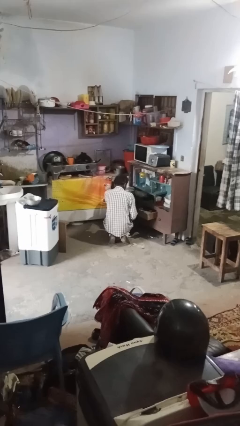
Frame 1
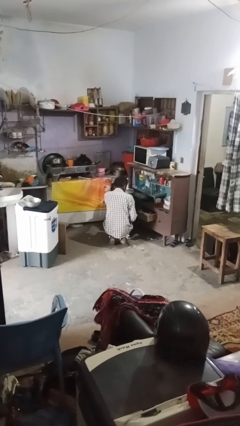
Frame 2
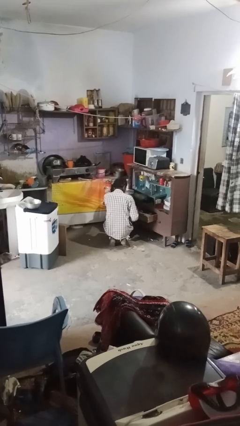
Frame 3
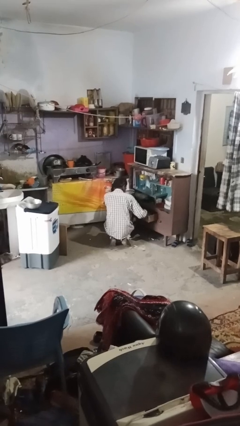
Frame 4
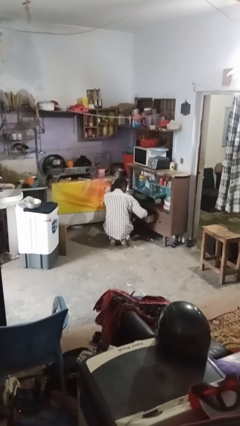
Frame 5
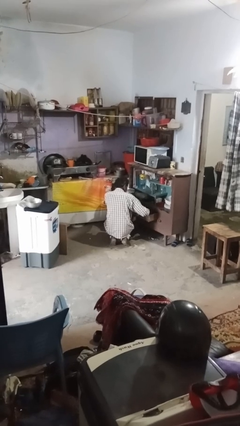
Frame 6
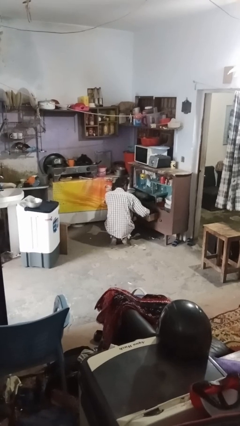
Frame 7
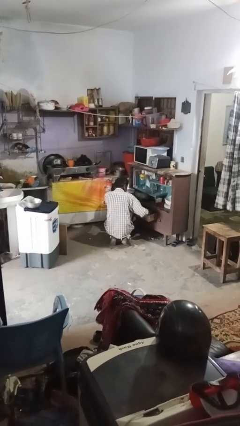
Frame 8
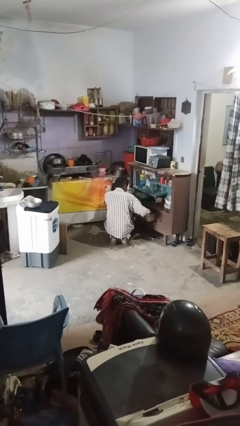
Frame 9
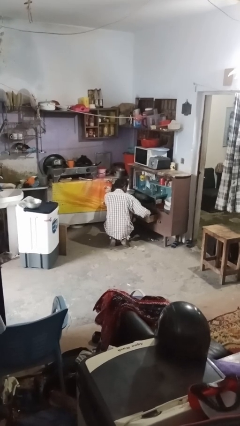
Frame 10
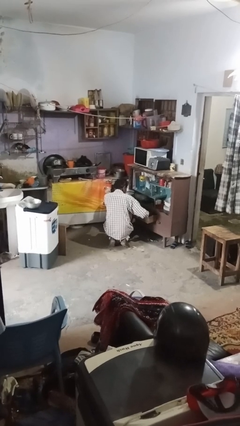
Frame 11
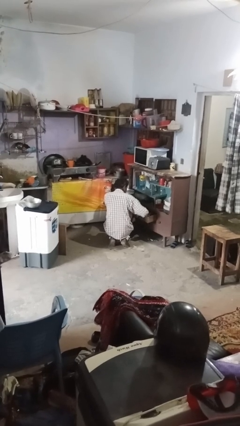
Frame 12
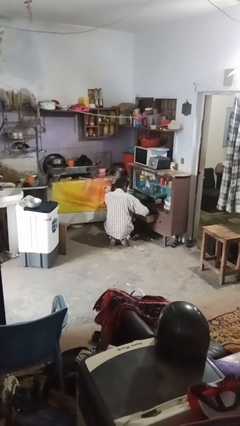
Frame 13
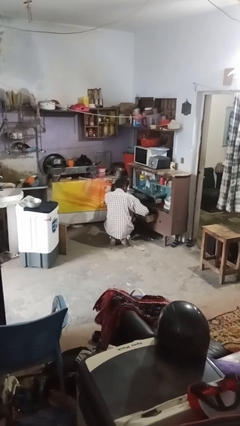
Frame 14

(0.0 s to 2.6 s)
person searches in kitchen drawer

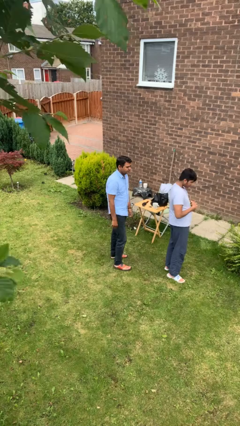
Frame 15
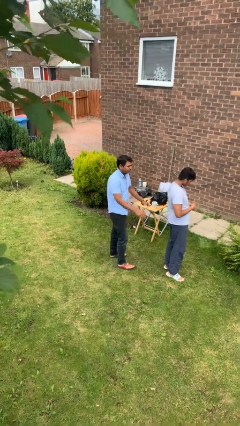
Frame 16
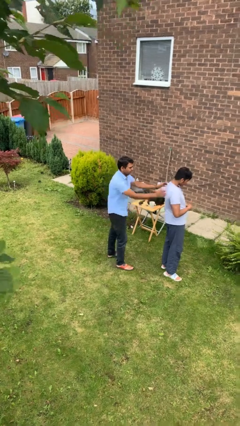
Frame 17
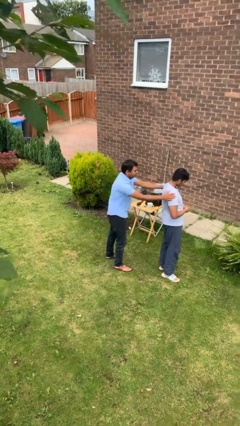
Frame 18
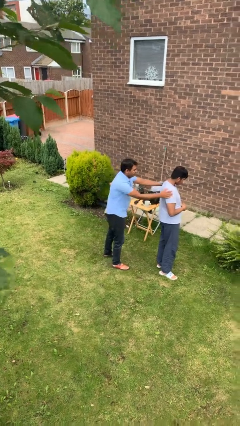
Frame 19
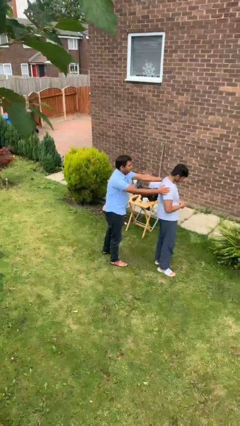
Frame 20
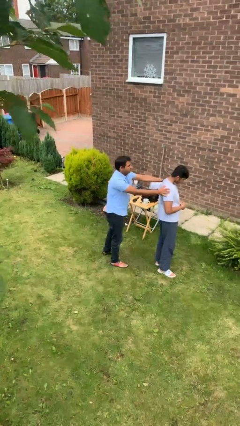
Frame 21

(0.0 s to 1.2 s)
person grabs person by shoulder

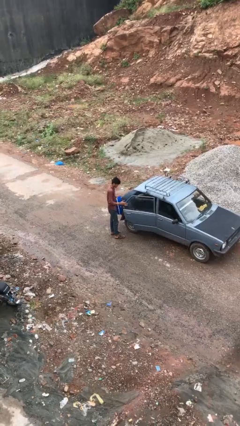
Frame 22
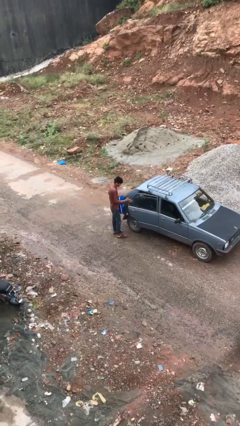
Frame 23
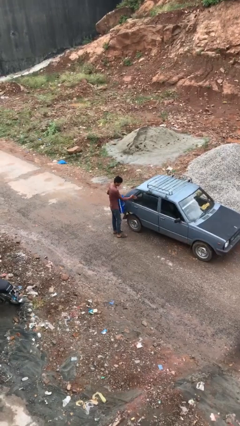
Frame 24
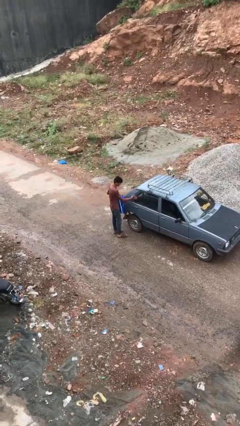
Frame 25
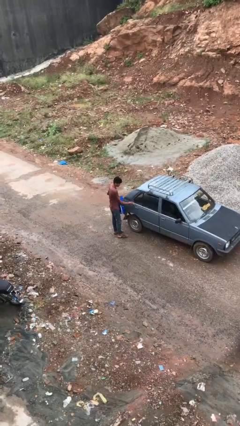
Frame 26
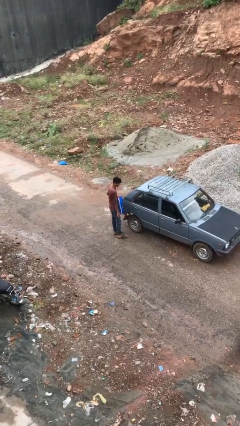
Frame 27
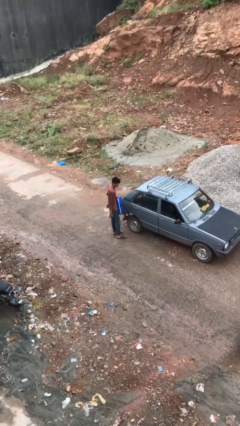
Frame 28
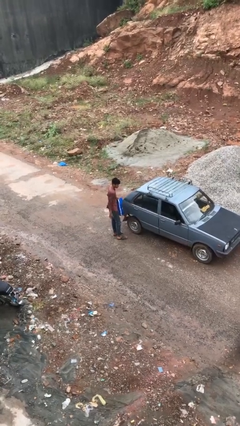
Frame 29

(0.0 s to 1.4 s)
person closes car door

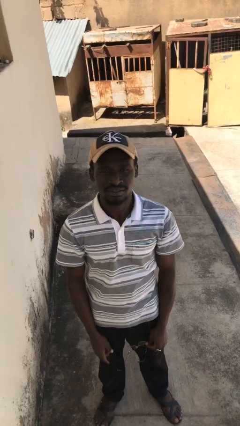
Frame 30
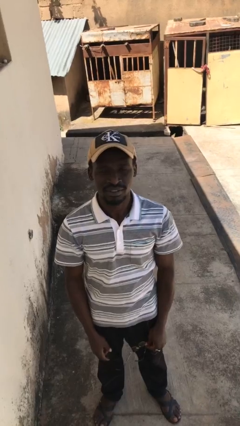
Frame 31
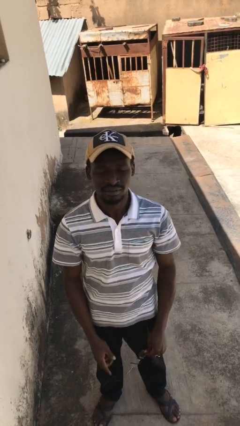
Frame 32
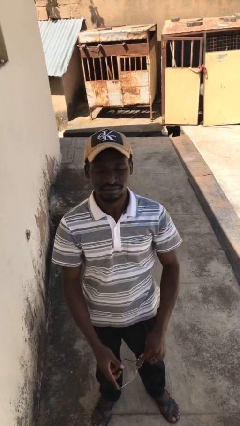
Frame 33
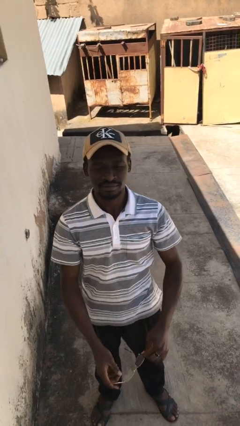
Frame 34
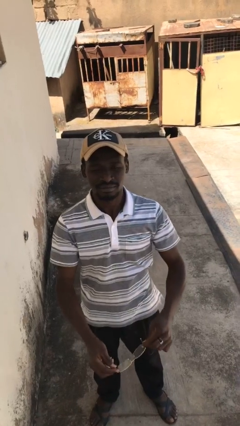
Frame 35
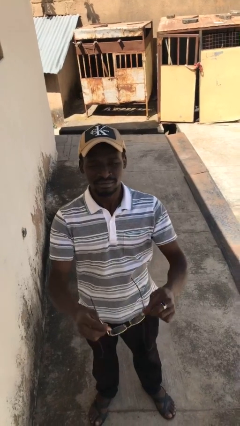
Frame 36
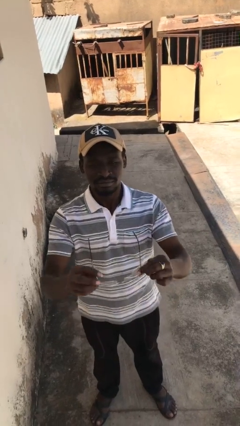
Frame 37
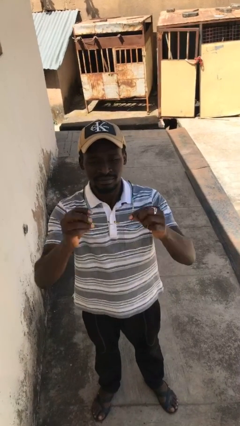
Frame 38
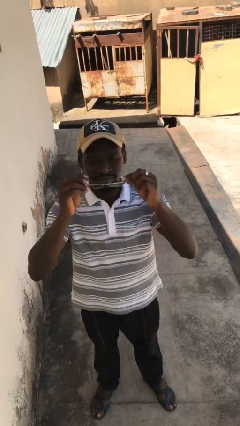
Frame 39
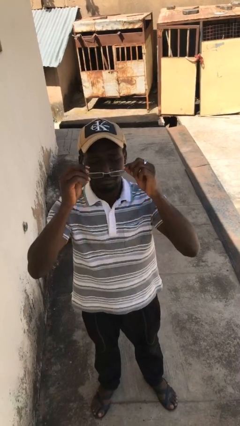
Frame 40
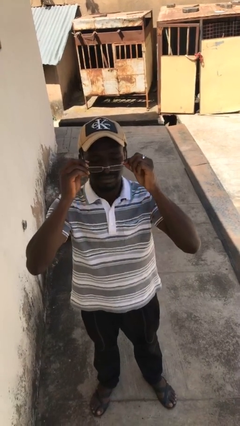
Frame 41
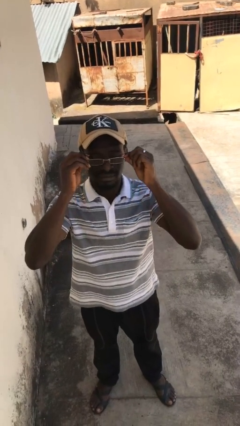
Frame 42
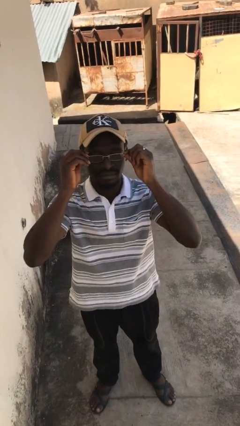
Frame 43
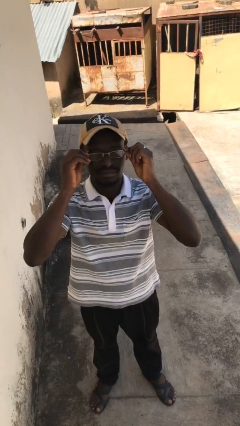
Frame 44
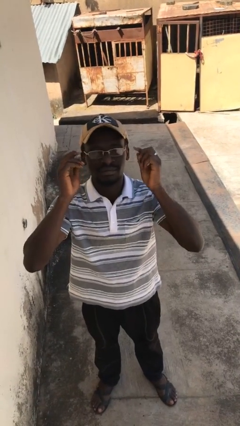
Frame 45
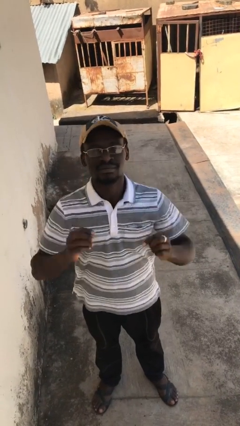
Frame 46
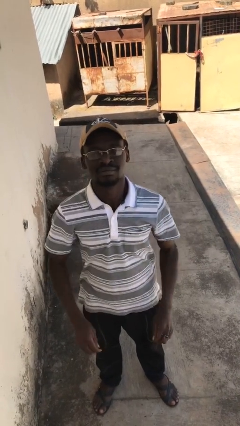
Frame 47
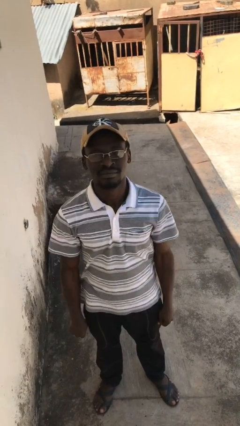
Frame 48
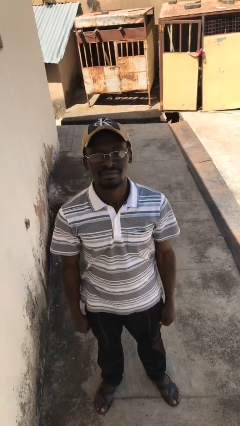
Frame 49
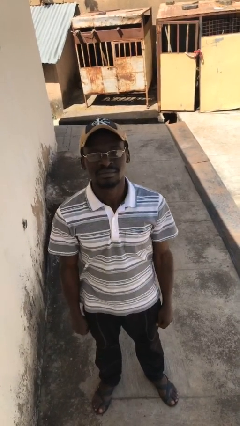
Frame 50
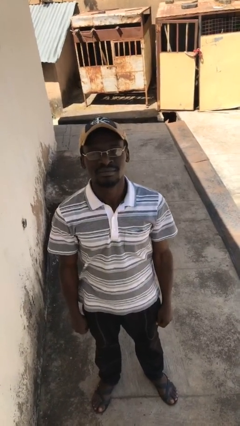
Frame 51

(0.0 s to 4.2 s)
person puts on glasses

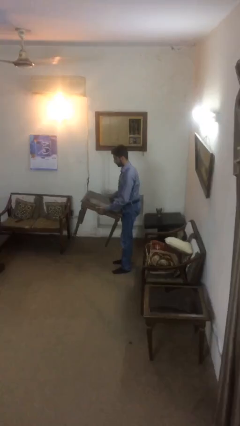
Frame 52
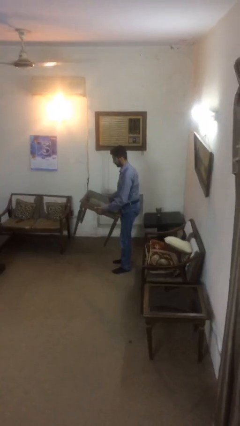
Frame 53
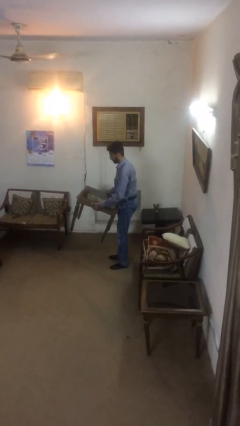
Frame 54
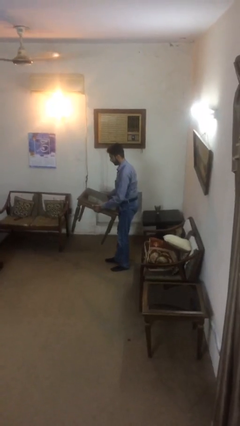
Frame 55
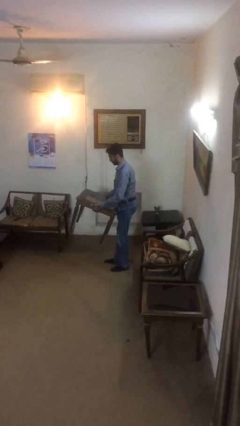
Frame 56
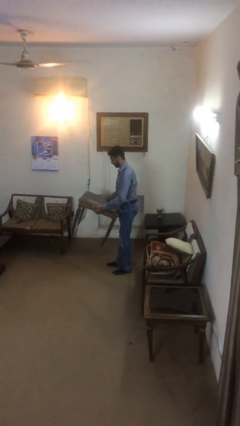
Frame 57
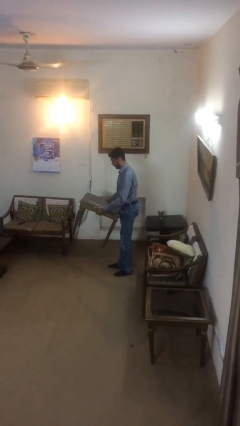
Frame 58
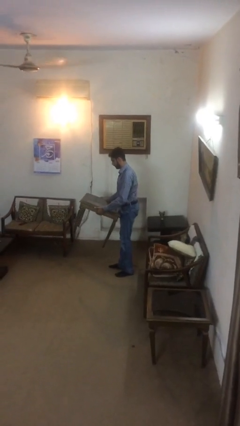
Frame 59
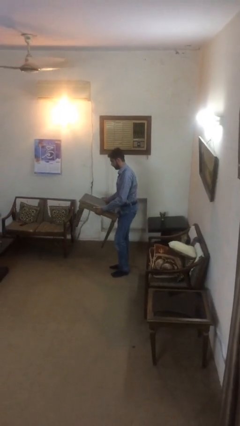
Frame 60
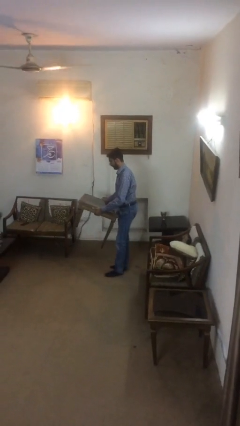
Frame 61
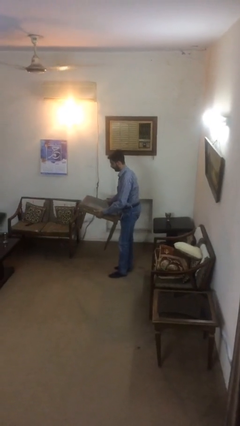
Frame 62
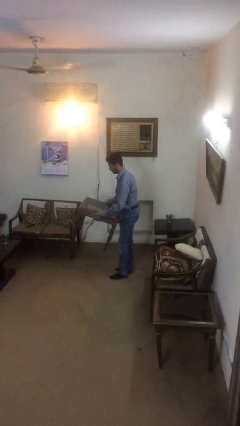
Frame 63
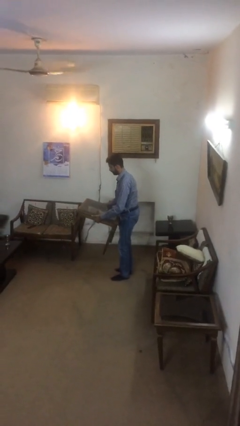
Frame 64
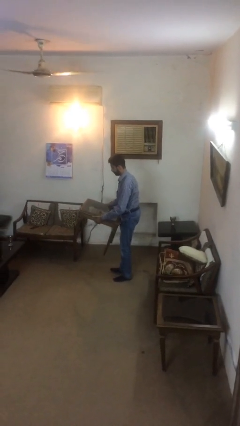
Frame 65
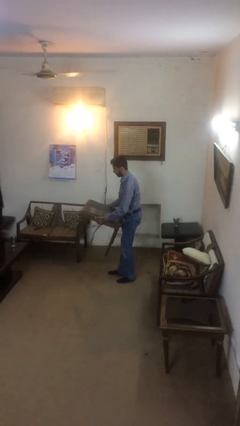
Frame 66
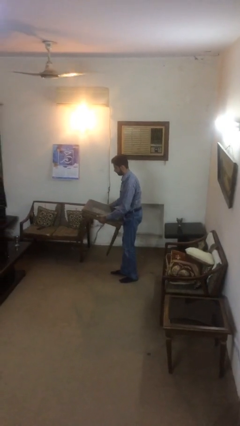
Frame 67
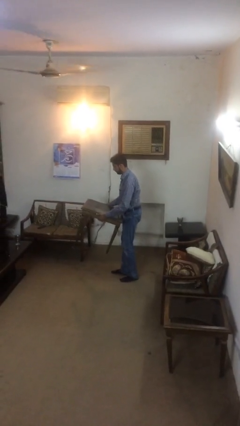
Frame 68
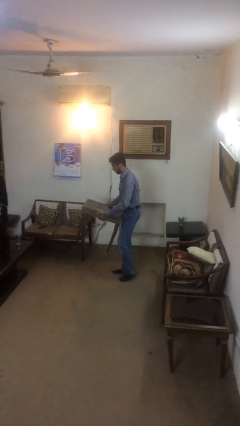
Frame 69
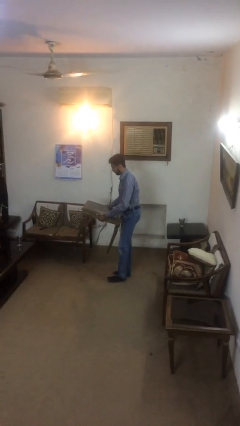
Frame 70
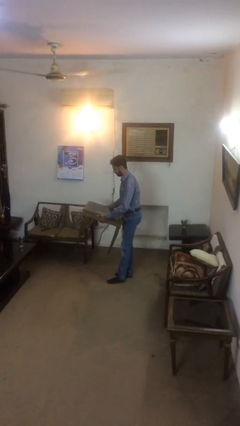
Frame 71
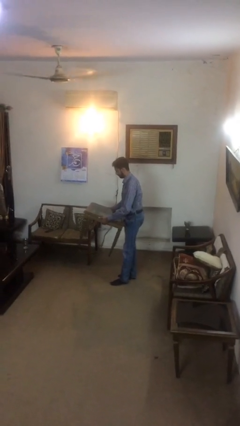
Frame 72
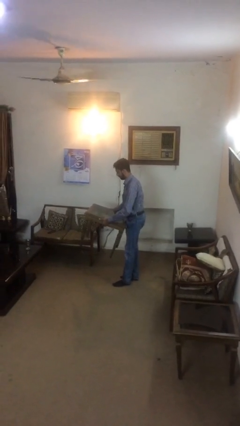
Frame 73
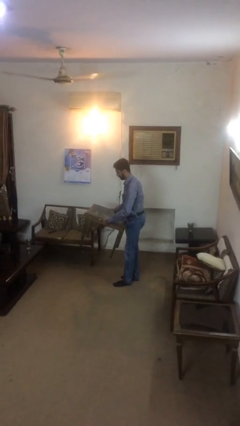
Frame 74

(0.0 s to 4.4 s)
person carries heavy object

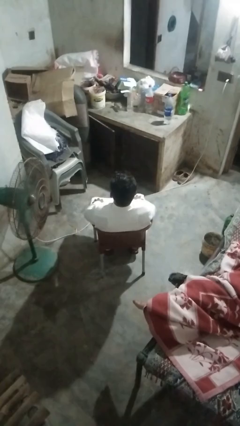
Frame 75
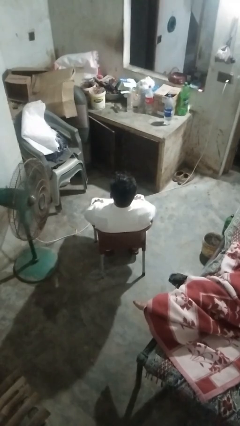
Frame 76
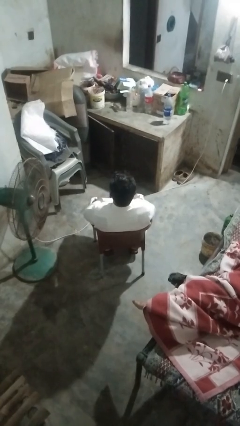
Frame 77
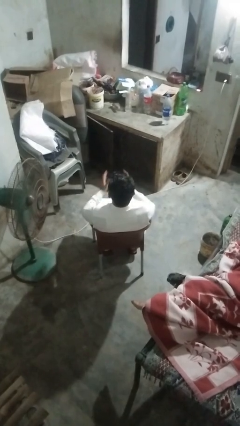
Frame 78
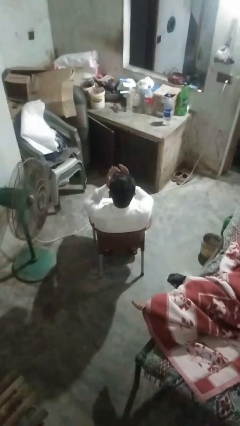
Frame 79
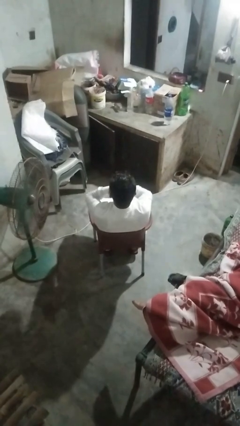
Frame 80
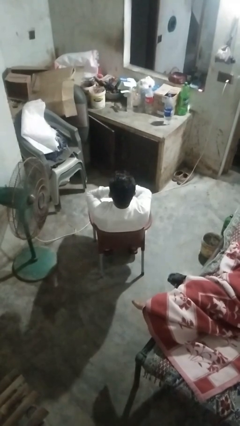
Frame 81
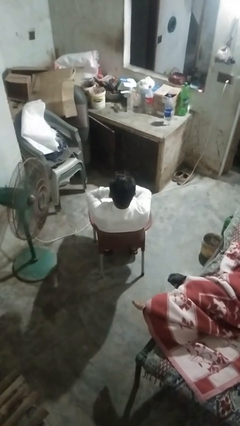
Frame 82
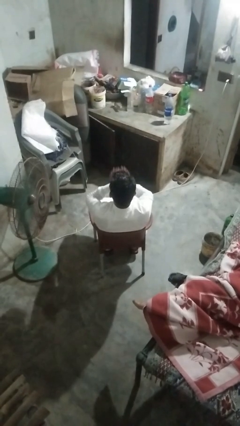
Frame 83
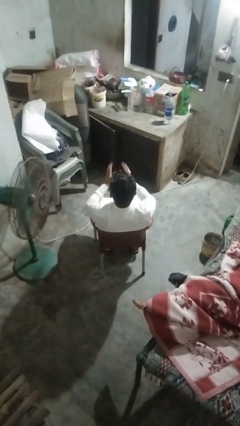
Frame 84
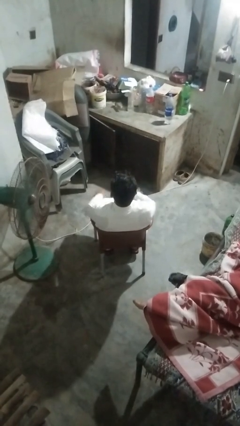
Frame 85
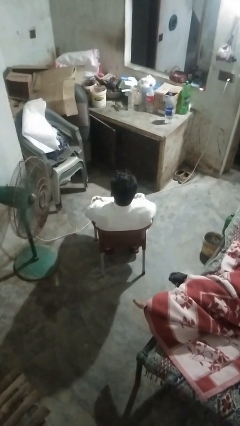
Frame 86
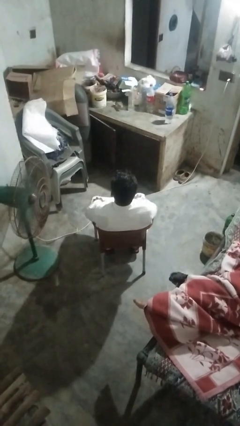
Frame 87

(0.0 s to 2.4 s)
person yawns

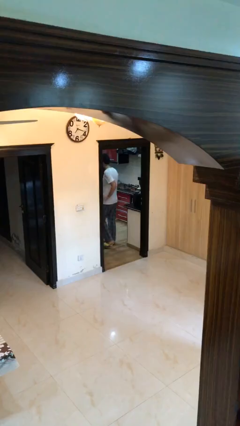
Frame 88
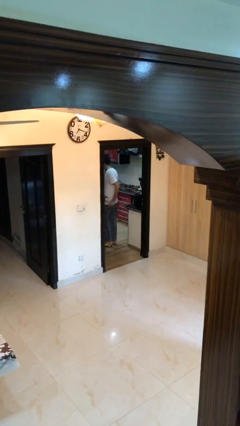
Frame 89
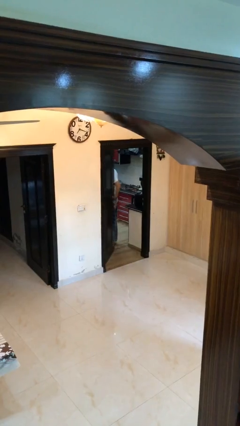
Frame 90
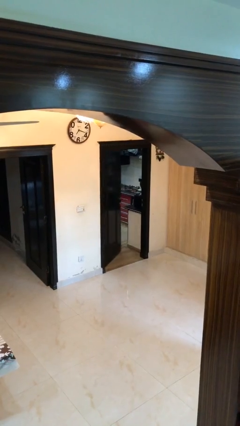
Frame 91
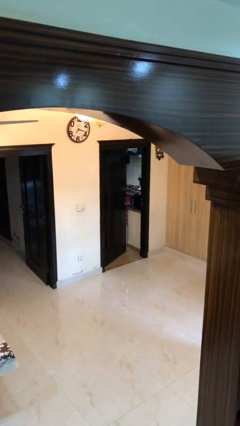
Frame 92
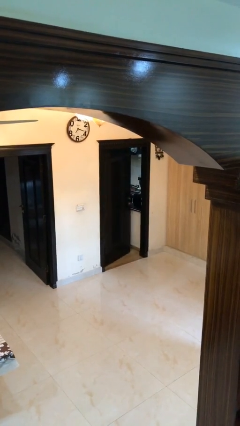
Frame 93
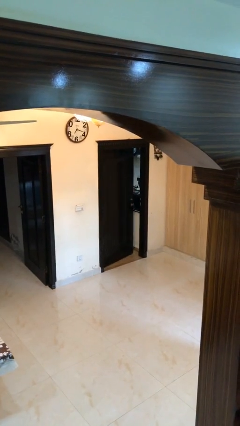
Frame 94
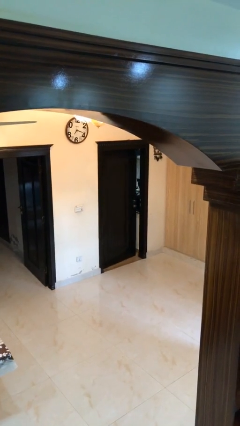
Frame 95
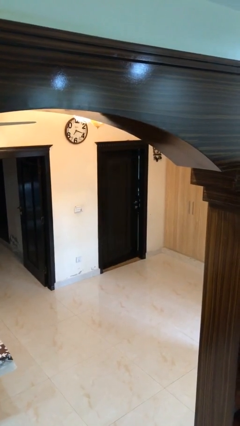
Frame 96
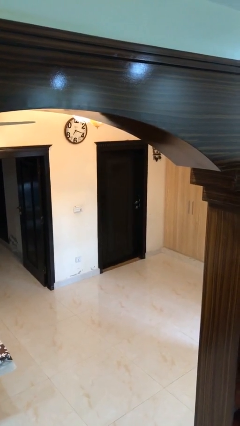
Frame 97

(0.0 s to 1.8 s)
person closes facility door
